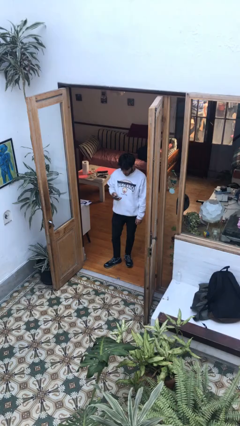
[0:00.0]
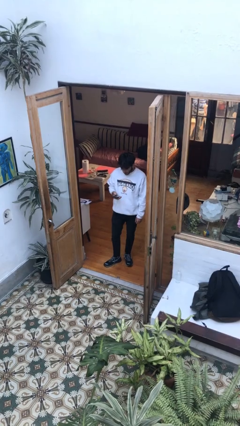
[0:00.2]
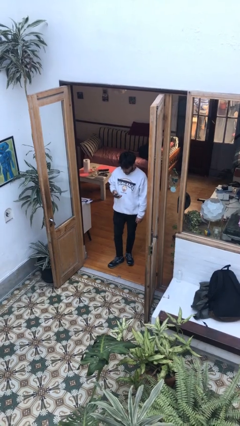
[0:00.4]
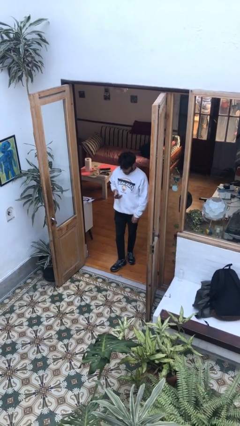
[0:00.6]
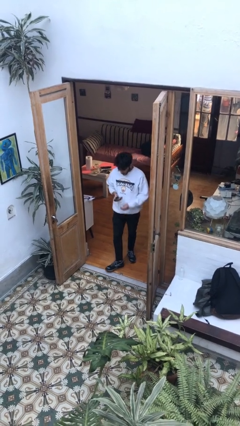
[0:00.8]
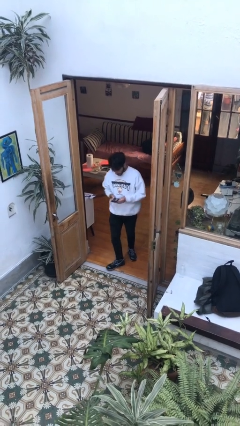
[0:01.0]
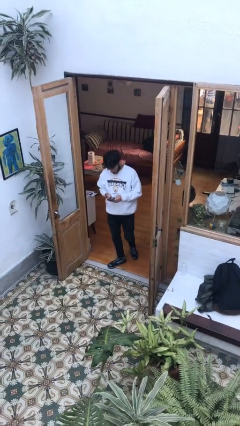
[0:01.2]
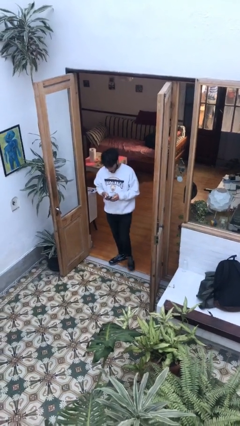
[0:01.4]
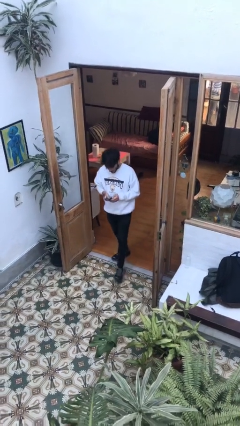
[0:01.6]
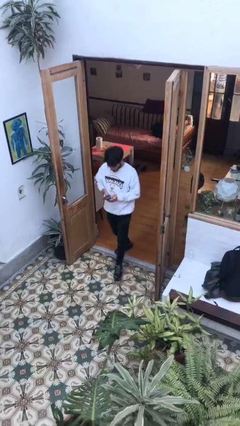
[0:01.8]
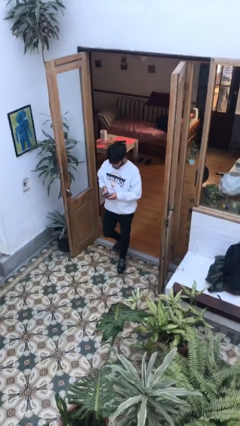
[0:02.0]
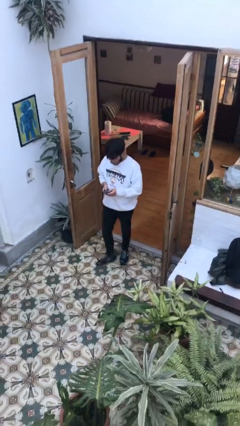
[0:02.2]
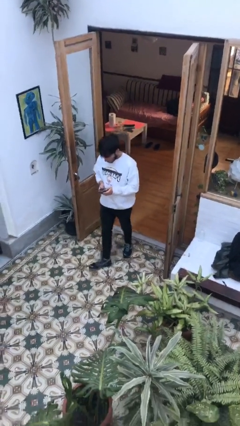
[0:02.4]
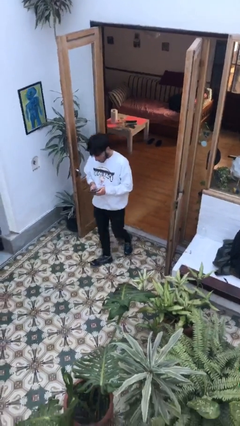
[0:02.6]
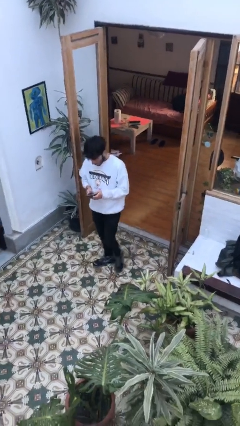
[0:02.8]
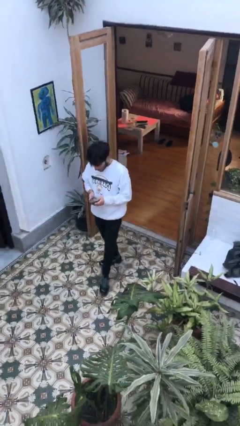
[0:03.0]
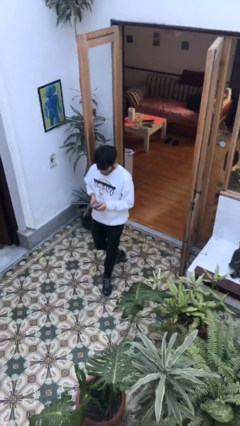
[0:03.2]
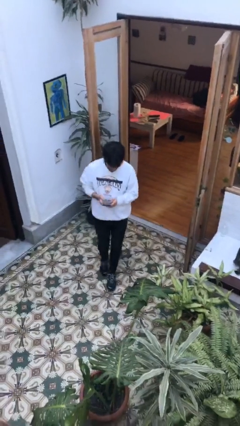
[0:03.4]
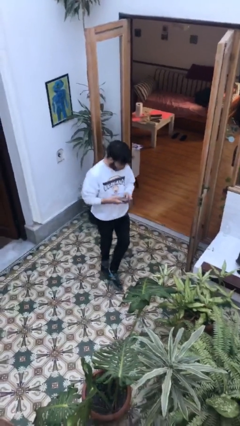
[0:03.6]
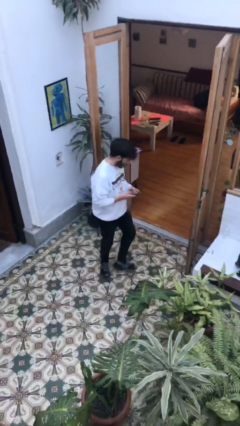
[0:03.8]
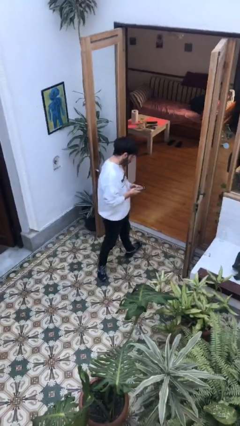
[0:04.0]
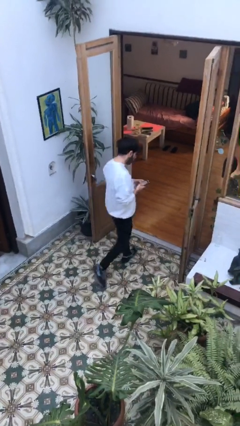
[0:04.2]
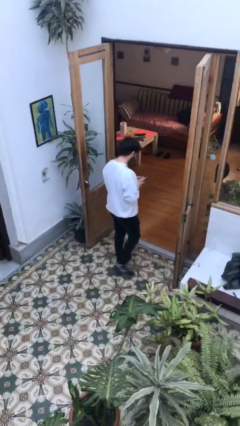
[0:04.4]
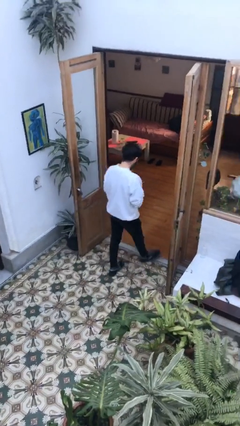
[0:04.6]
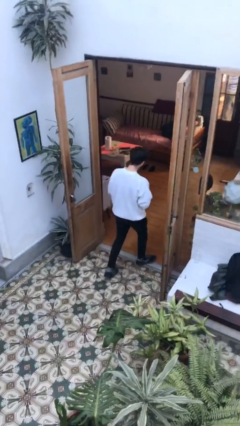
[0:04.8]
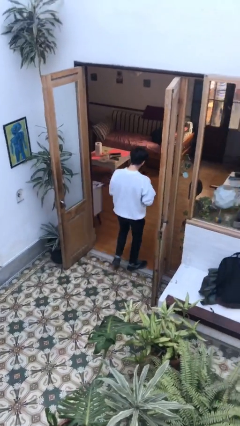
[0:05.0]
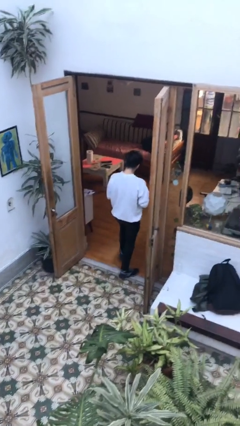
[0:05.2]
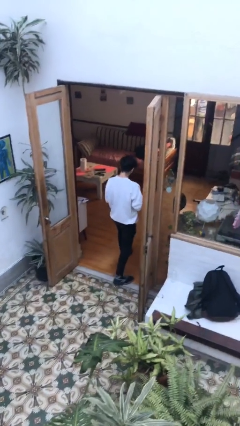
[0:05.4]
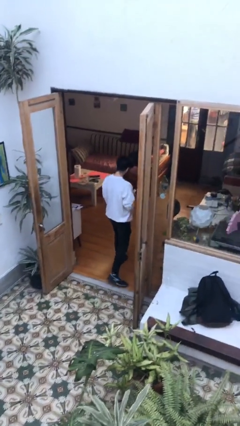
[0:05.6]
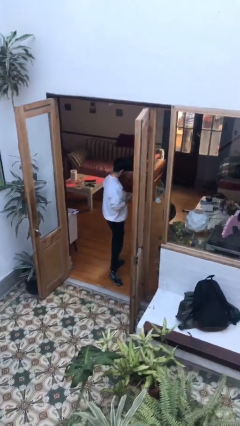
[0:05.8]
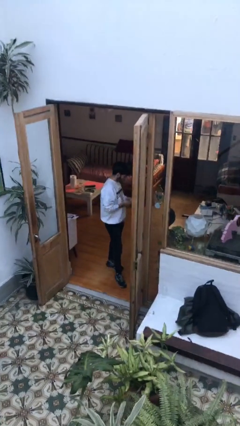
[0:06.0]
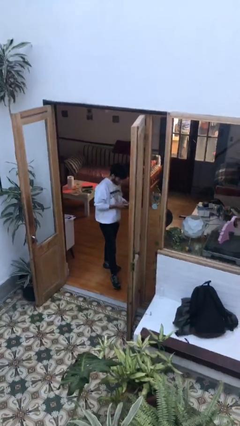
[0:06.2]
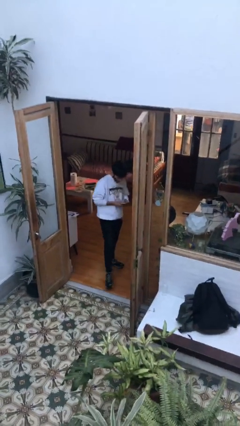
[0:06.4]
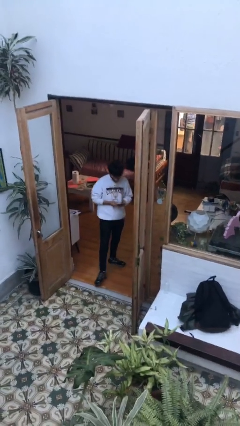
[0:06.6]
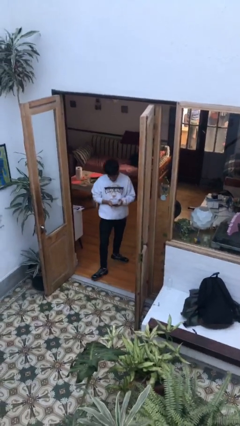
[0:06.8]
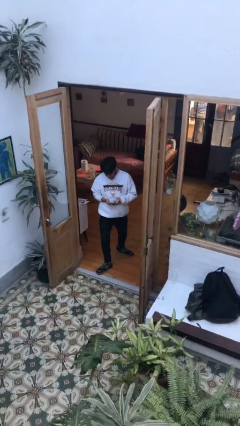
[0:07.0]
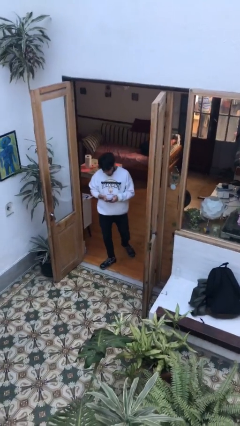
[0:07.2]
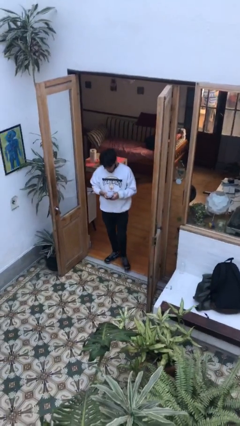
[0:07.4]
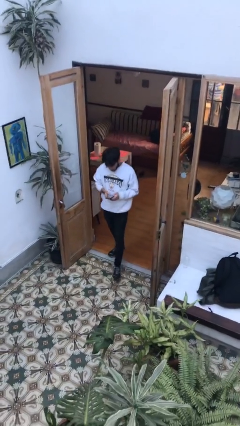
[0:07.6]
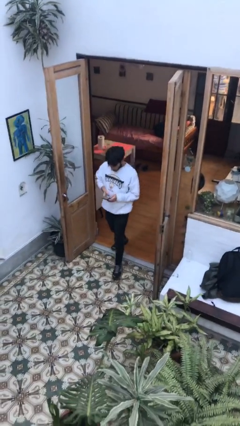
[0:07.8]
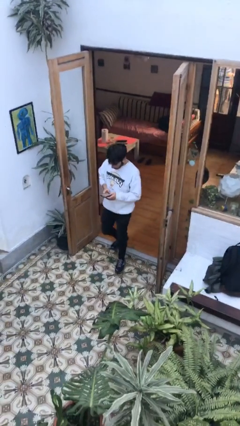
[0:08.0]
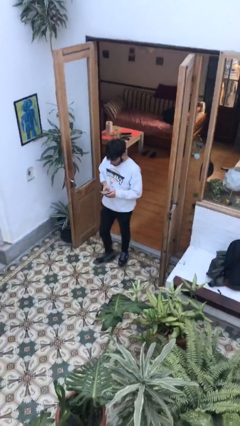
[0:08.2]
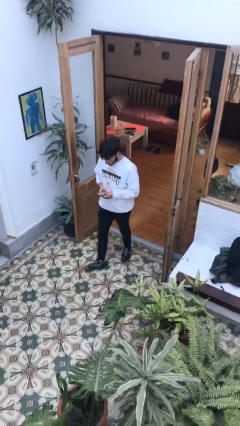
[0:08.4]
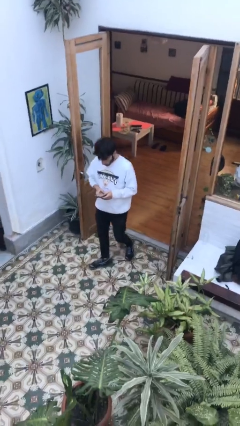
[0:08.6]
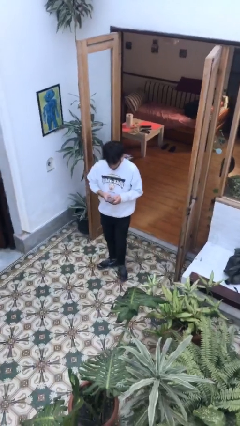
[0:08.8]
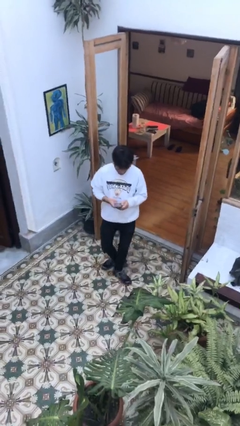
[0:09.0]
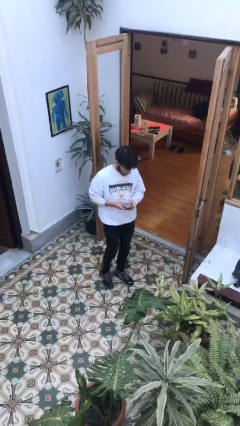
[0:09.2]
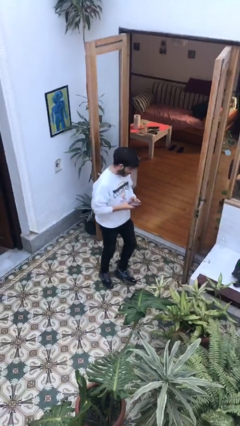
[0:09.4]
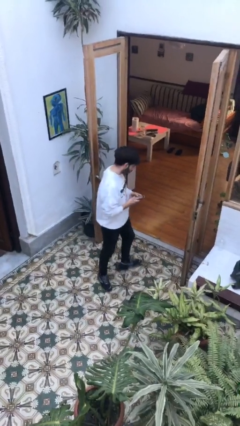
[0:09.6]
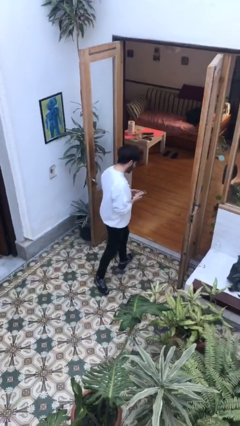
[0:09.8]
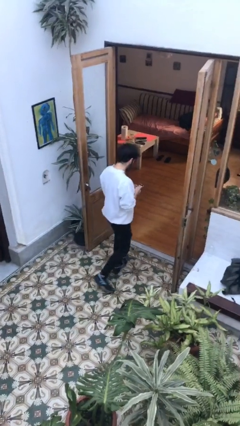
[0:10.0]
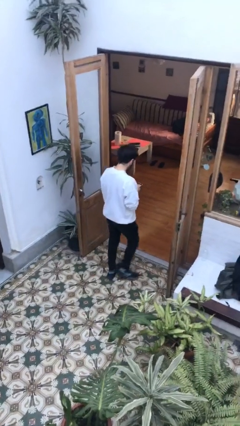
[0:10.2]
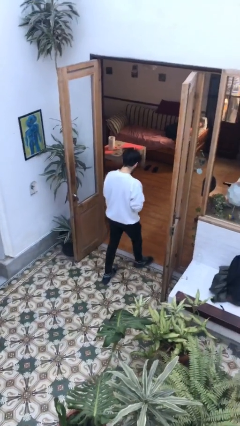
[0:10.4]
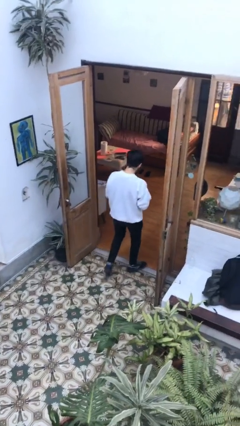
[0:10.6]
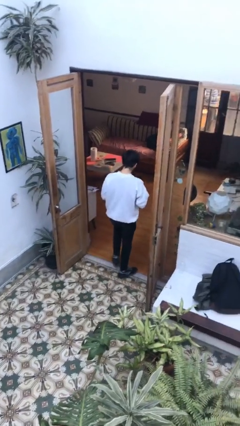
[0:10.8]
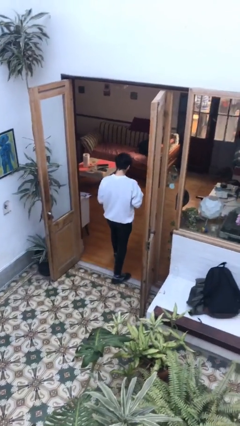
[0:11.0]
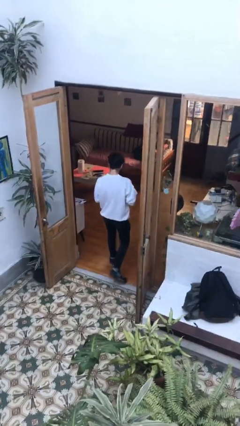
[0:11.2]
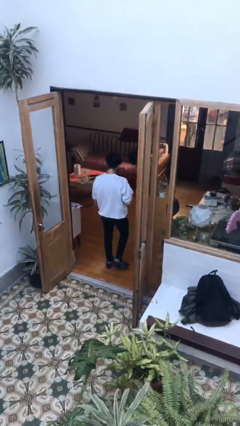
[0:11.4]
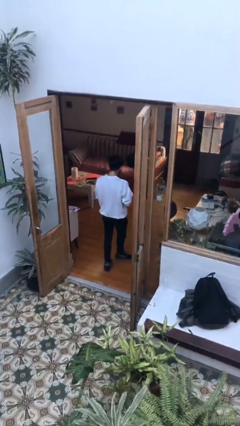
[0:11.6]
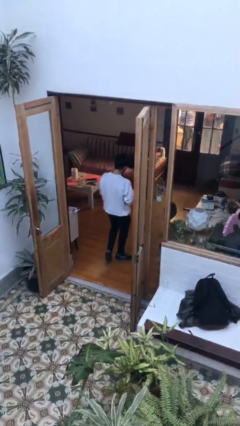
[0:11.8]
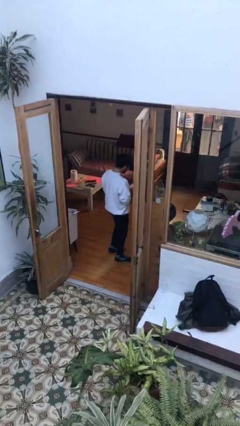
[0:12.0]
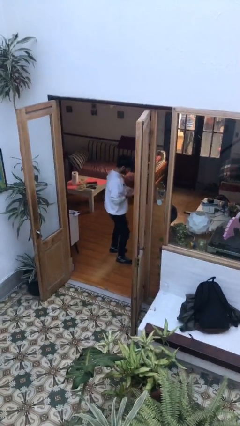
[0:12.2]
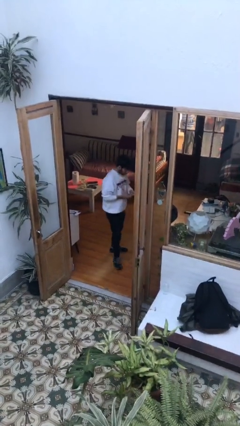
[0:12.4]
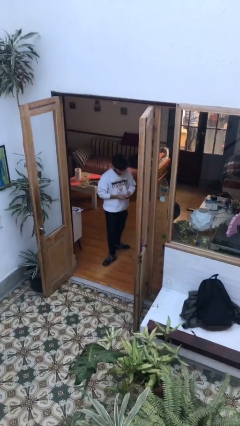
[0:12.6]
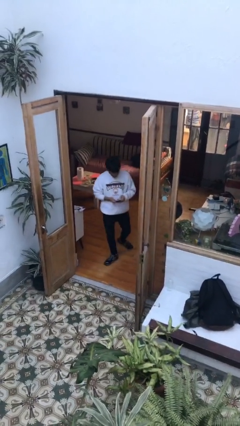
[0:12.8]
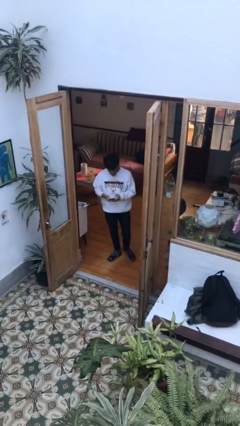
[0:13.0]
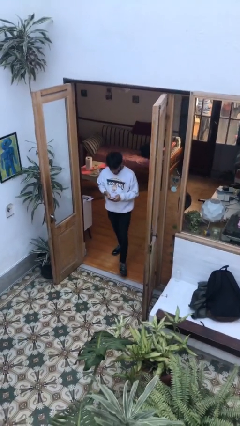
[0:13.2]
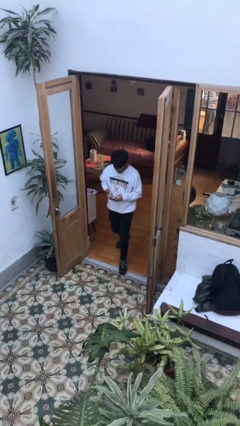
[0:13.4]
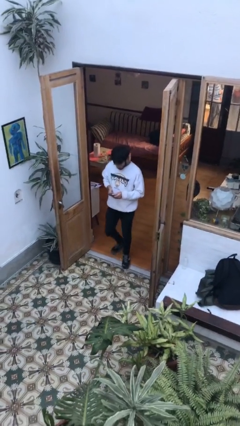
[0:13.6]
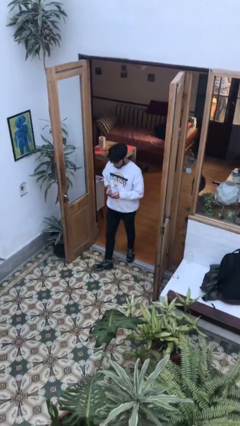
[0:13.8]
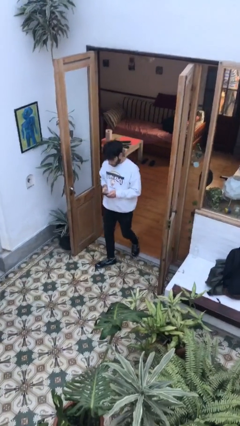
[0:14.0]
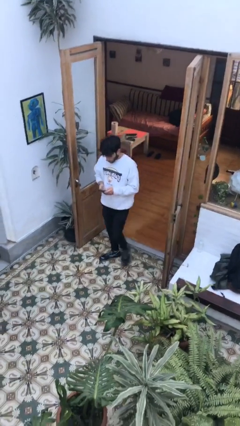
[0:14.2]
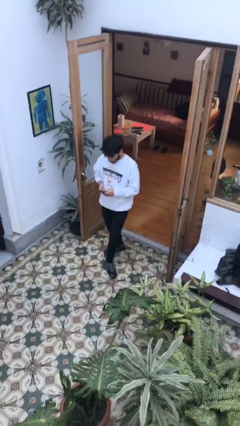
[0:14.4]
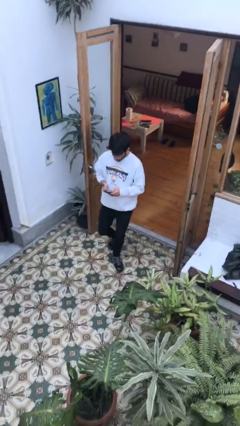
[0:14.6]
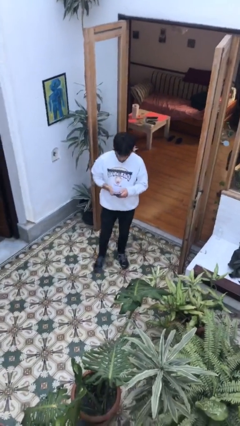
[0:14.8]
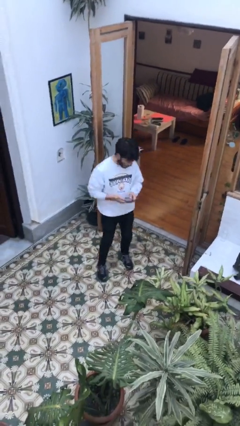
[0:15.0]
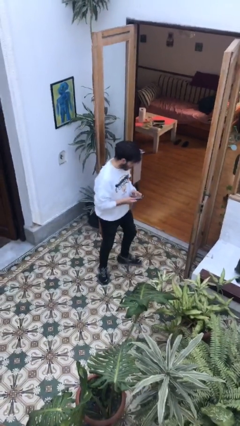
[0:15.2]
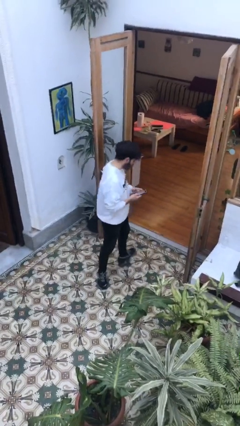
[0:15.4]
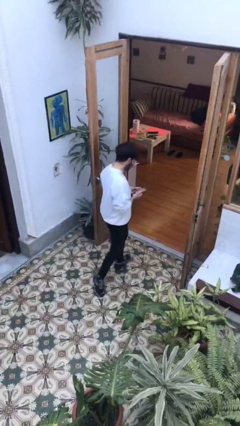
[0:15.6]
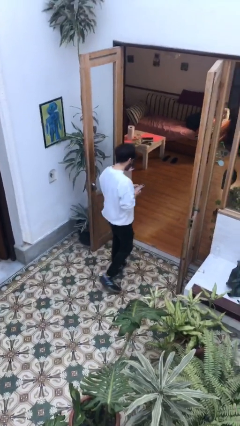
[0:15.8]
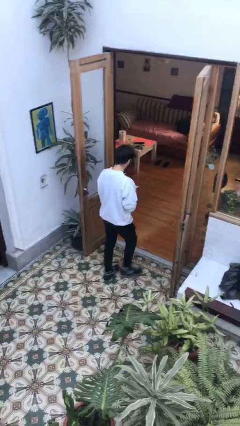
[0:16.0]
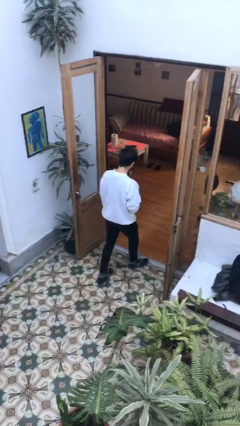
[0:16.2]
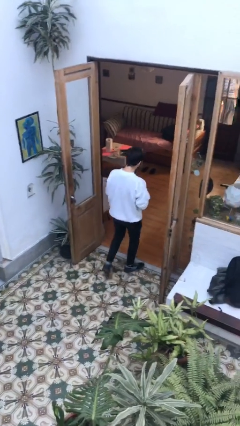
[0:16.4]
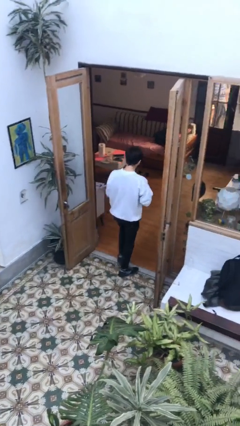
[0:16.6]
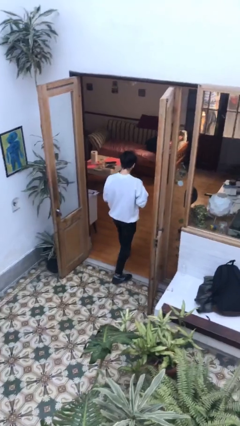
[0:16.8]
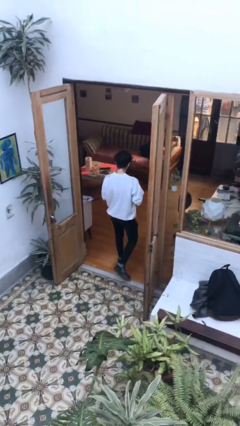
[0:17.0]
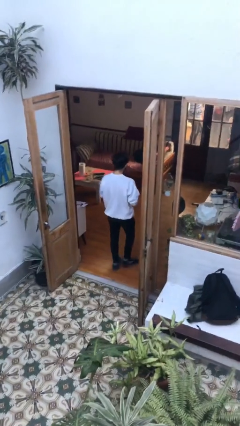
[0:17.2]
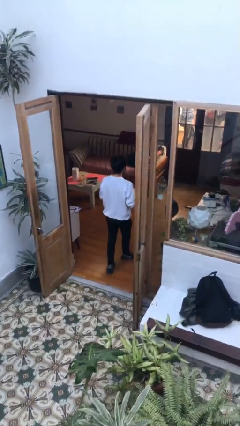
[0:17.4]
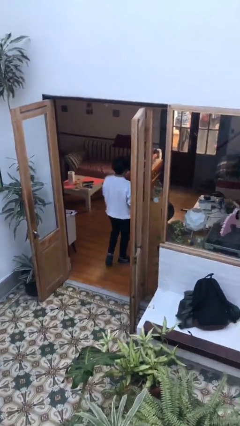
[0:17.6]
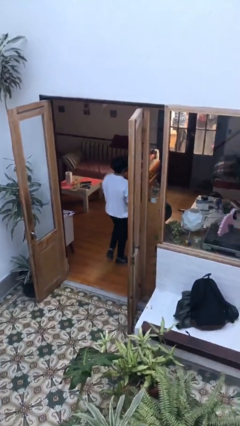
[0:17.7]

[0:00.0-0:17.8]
person texts on phone

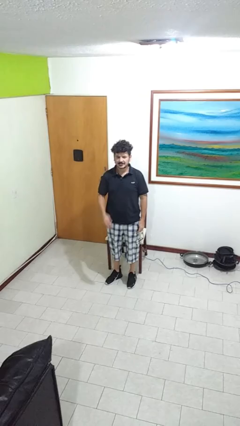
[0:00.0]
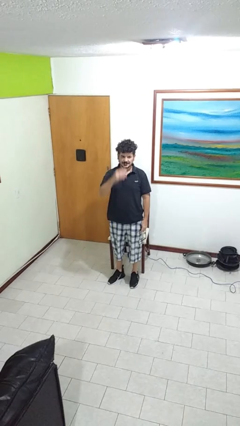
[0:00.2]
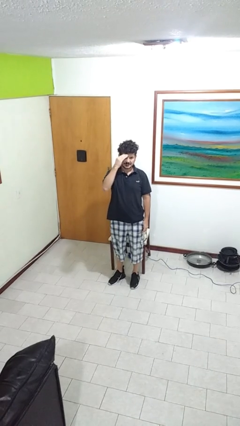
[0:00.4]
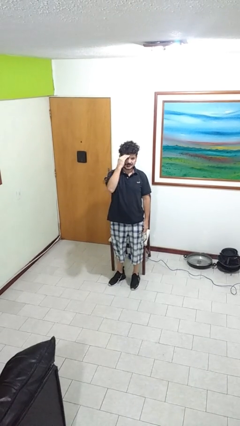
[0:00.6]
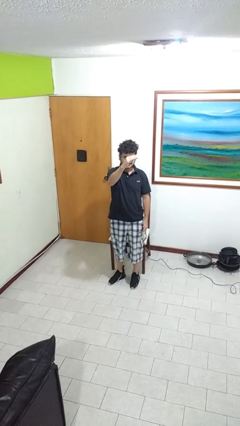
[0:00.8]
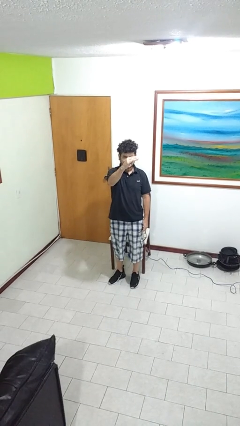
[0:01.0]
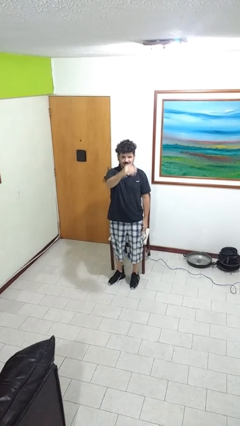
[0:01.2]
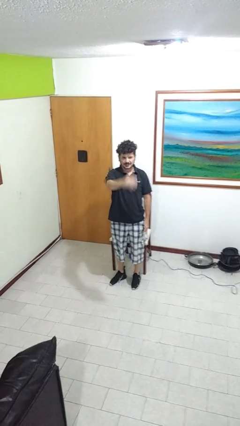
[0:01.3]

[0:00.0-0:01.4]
person salutes
